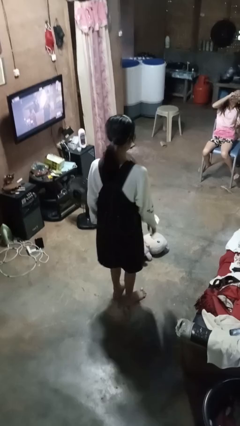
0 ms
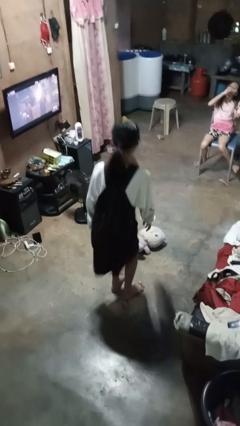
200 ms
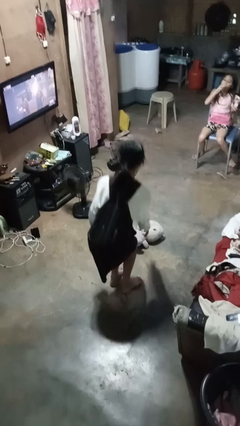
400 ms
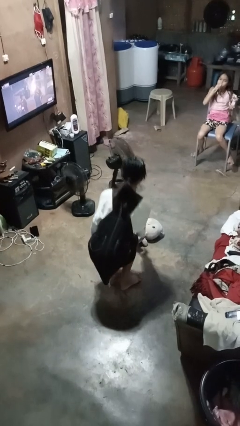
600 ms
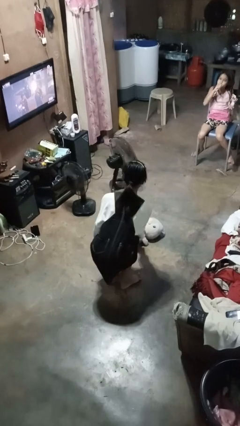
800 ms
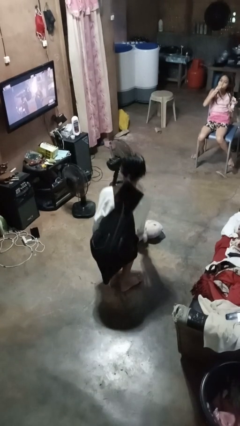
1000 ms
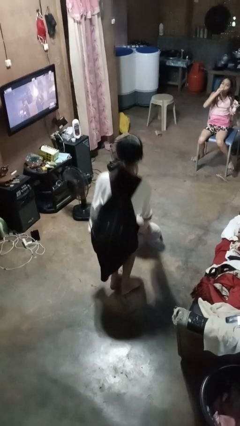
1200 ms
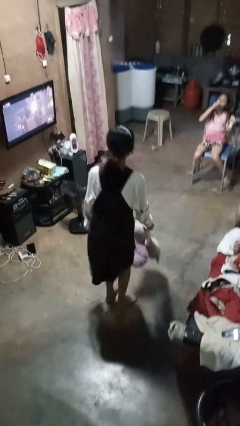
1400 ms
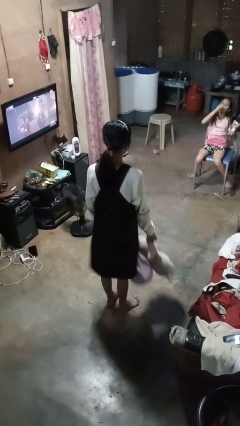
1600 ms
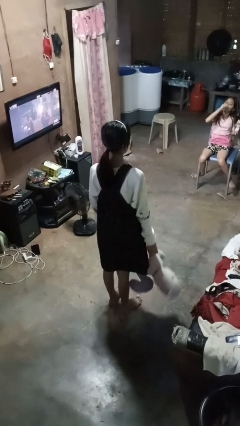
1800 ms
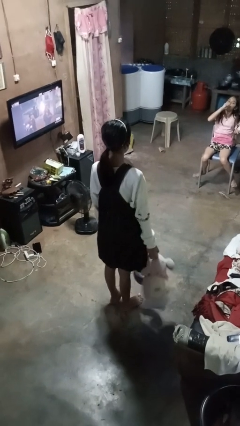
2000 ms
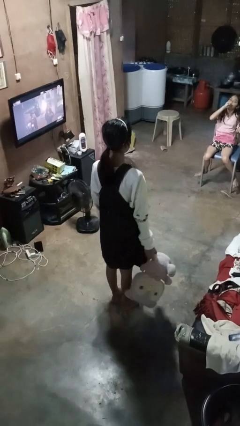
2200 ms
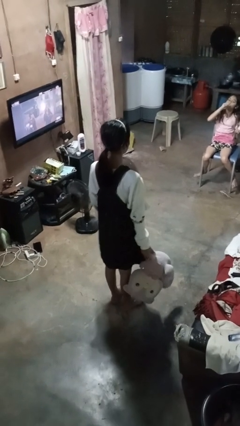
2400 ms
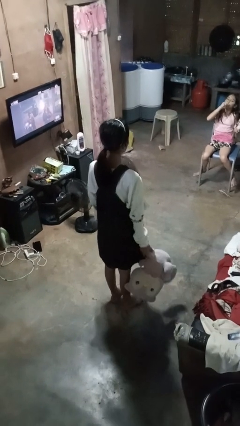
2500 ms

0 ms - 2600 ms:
person picks up object from floor

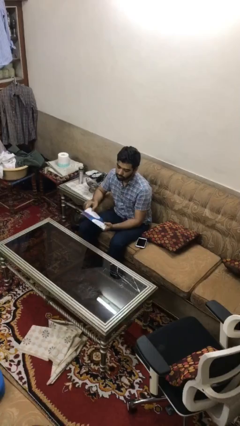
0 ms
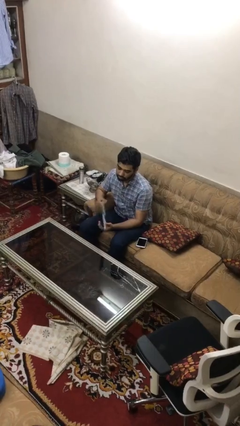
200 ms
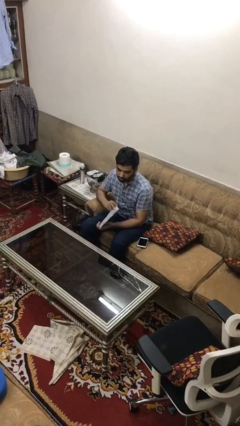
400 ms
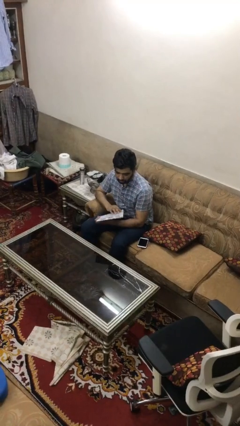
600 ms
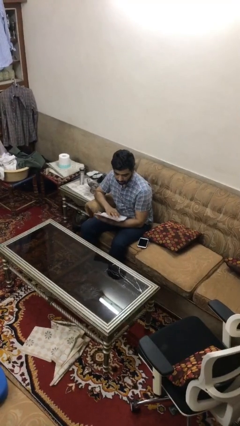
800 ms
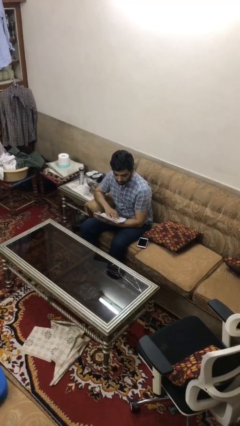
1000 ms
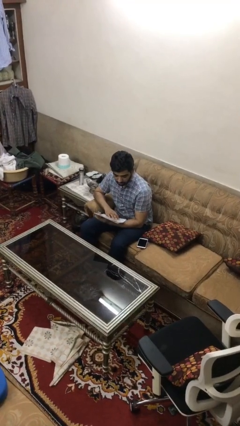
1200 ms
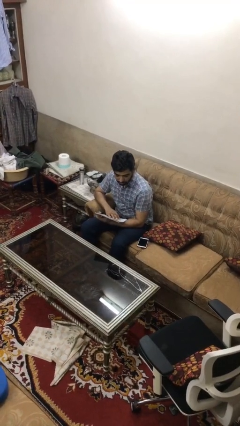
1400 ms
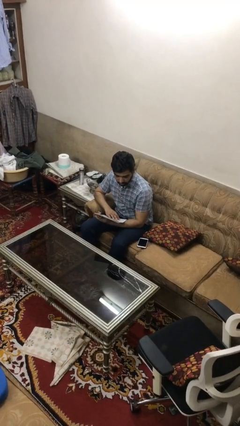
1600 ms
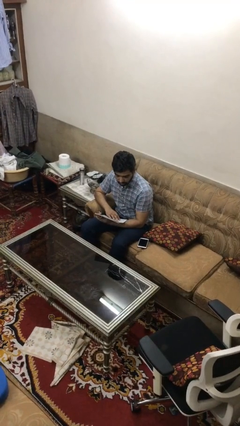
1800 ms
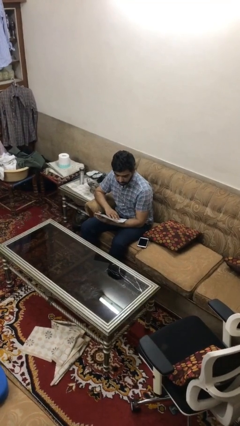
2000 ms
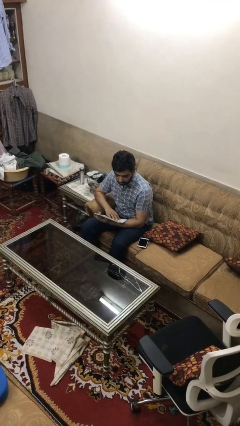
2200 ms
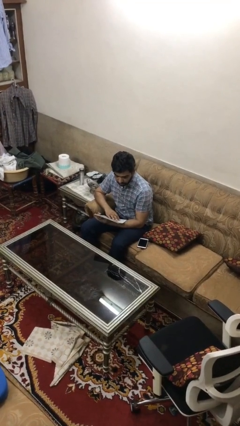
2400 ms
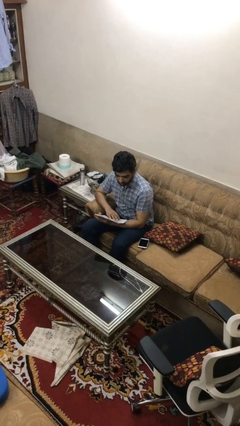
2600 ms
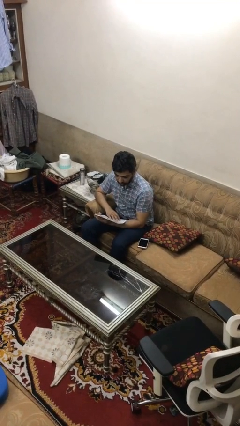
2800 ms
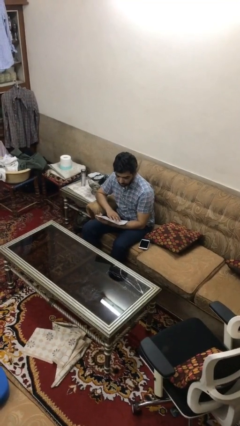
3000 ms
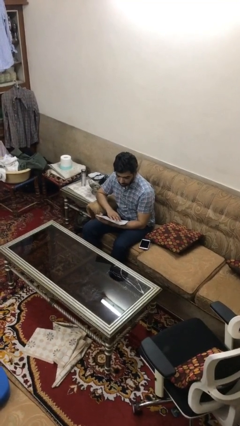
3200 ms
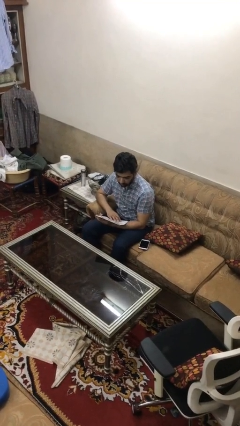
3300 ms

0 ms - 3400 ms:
person reads document

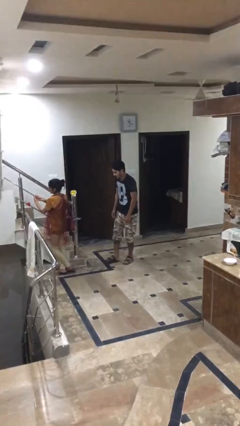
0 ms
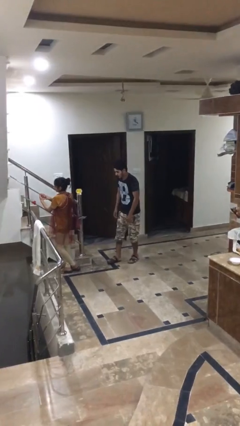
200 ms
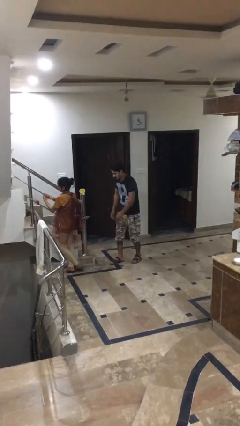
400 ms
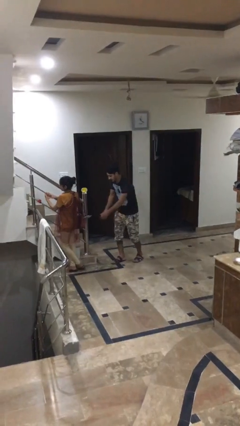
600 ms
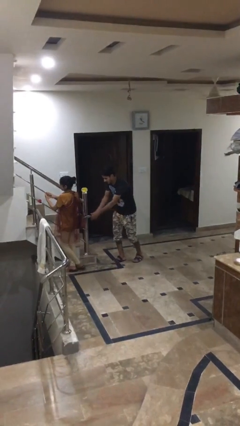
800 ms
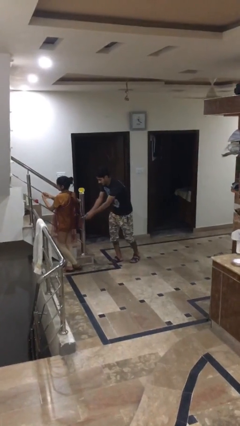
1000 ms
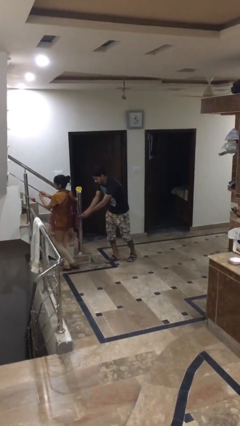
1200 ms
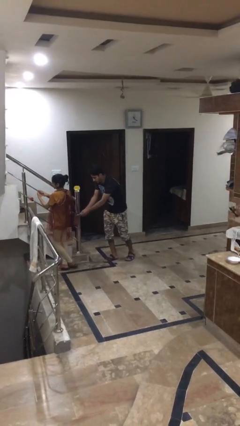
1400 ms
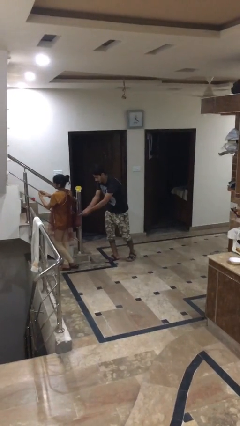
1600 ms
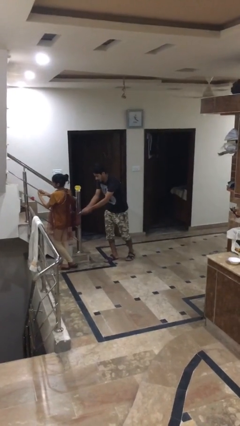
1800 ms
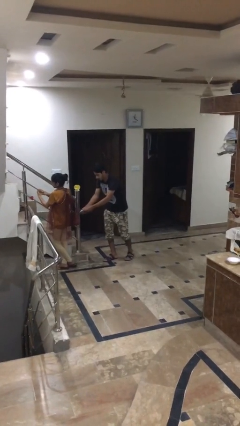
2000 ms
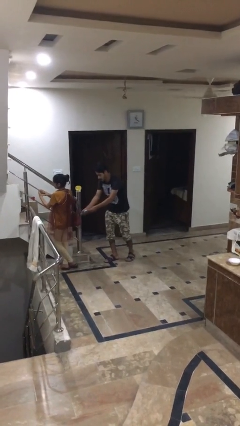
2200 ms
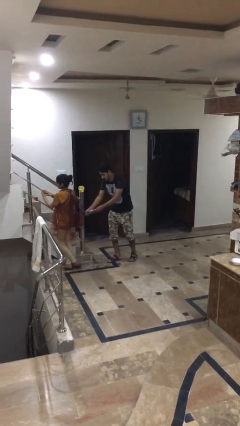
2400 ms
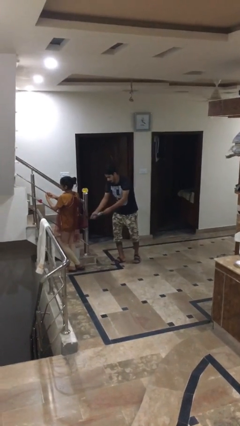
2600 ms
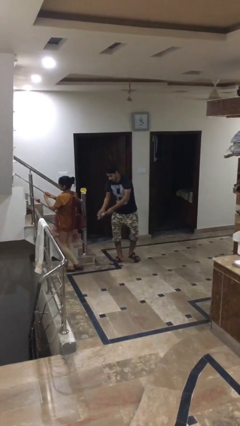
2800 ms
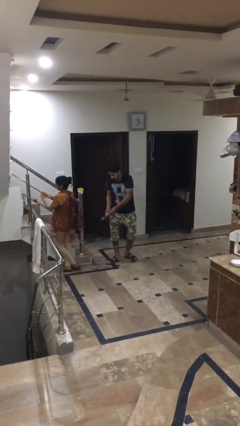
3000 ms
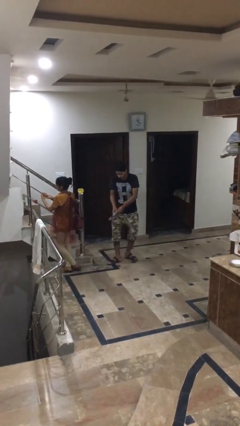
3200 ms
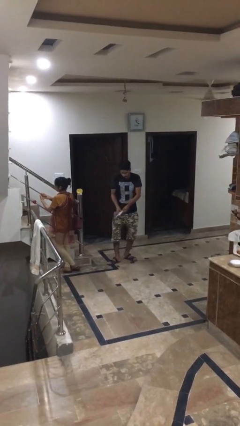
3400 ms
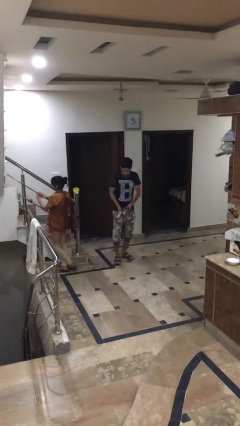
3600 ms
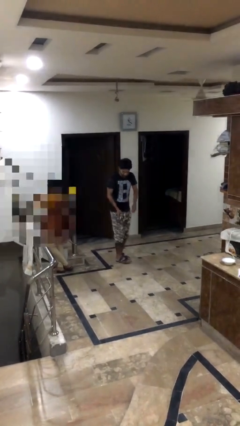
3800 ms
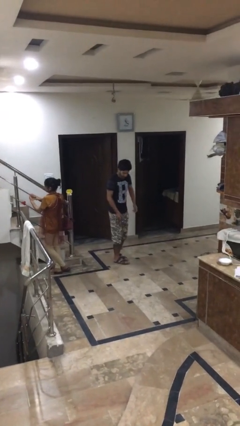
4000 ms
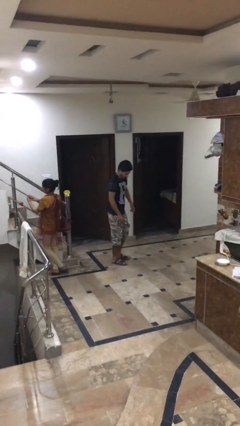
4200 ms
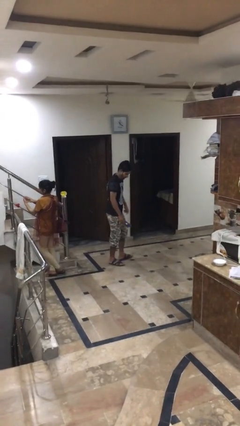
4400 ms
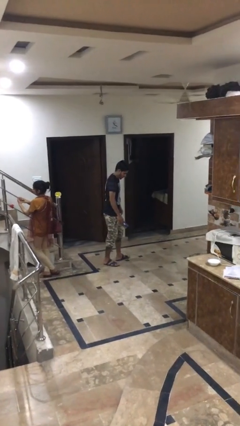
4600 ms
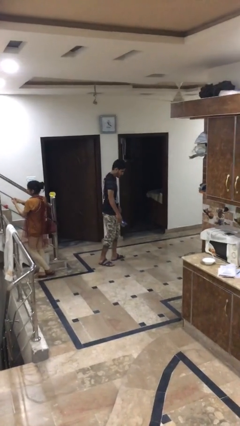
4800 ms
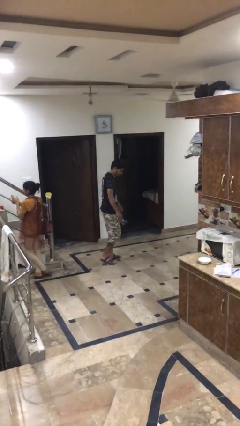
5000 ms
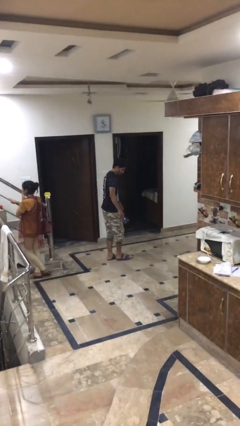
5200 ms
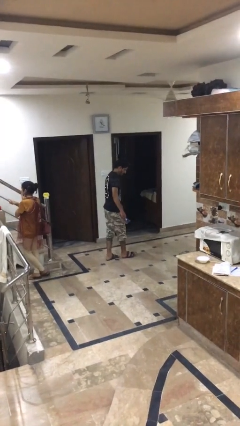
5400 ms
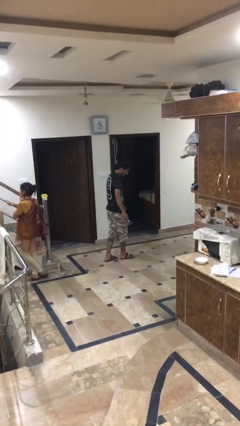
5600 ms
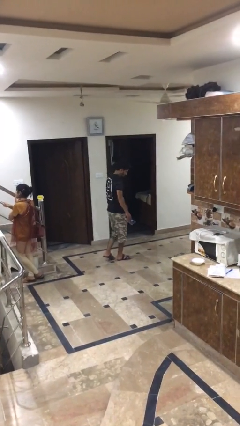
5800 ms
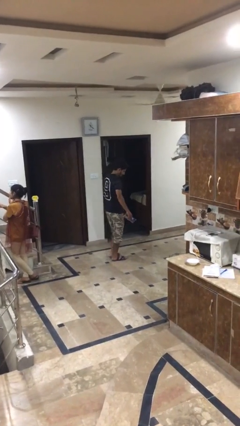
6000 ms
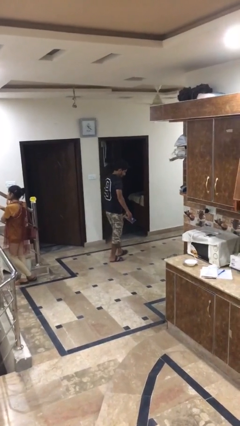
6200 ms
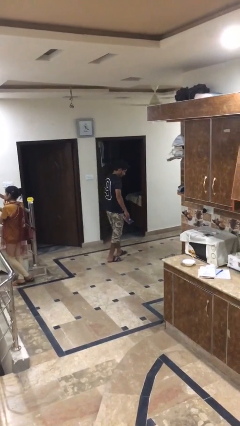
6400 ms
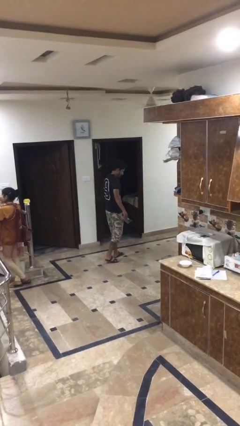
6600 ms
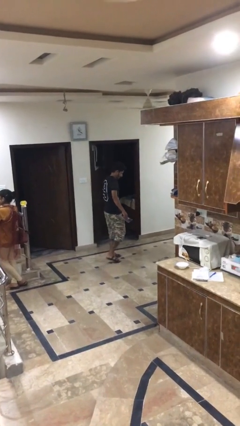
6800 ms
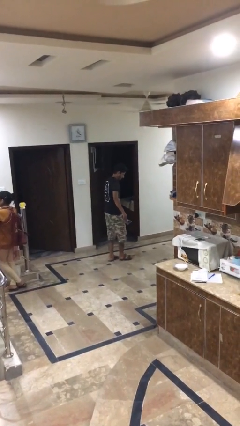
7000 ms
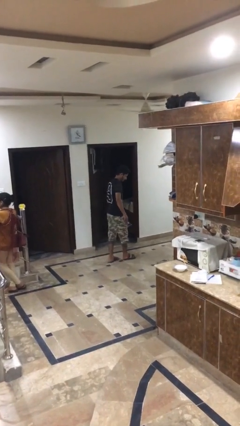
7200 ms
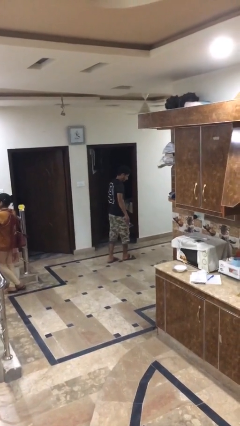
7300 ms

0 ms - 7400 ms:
person steals object from person

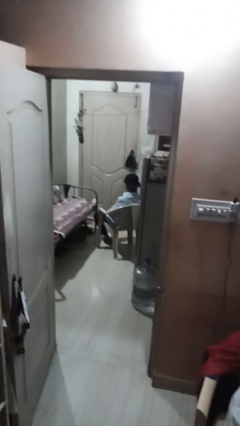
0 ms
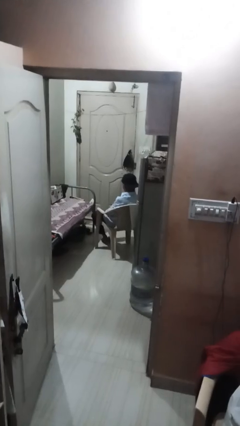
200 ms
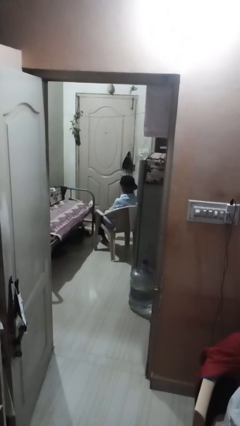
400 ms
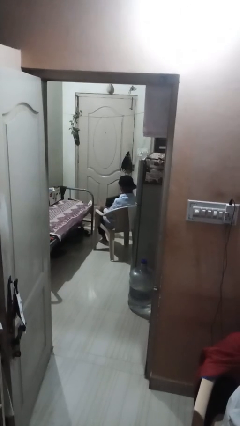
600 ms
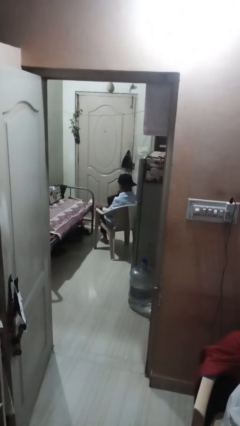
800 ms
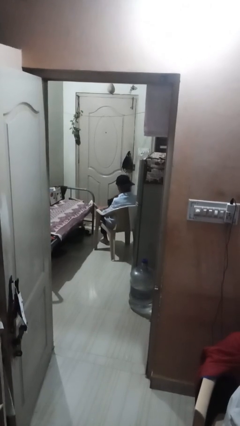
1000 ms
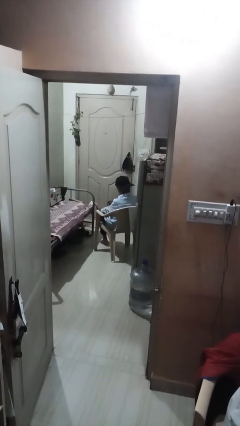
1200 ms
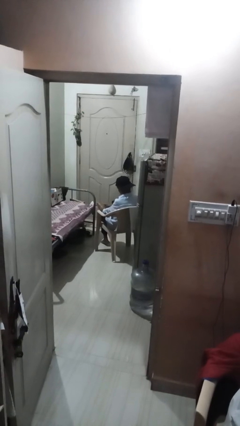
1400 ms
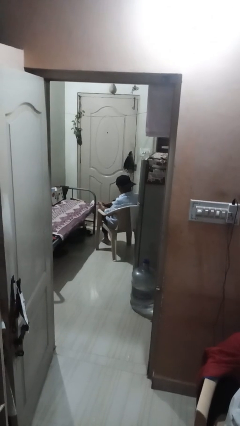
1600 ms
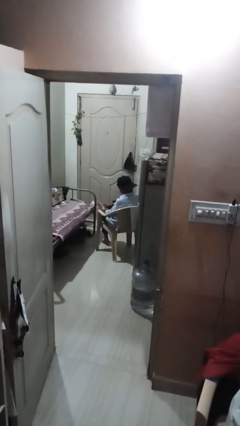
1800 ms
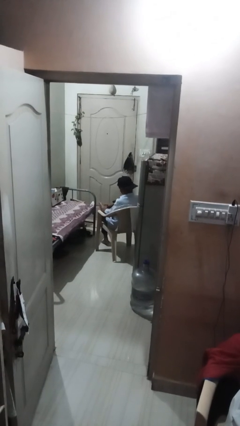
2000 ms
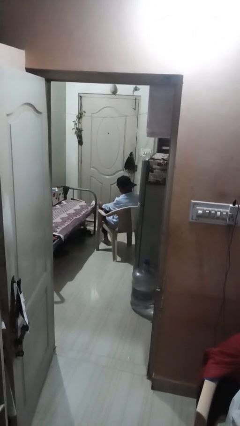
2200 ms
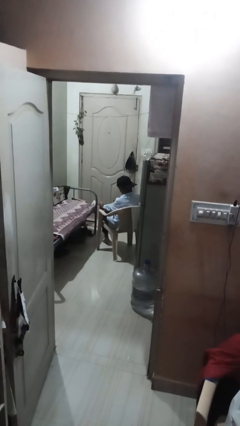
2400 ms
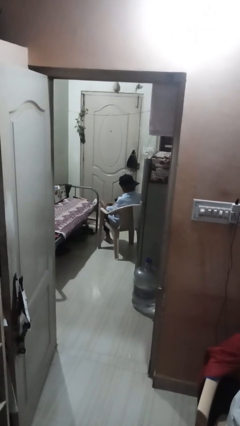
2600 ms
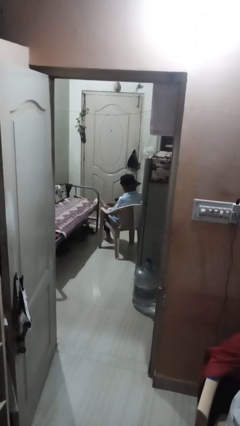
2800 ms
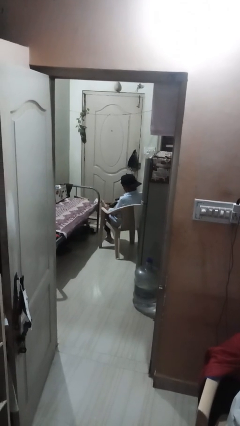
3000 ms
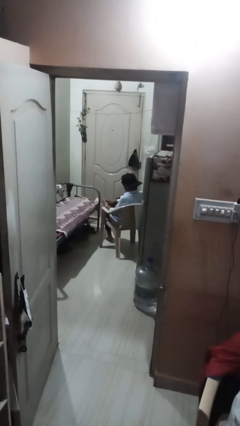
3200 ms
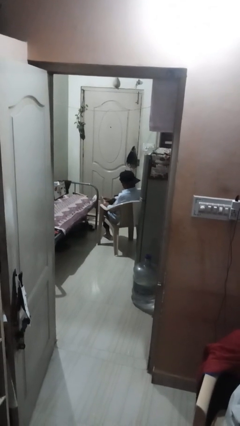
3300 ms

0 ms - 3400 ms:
person rubs foot

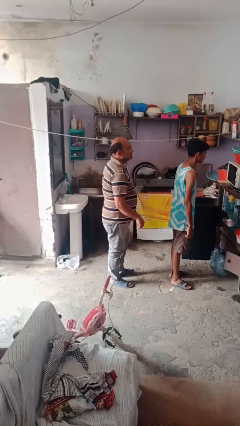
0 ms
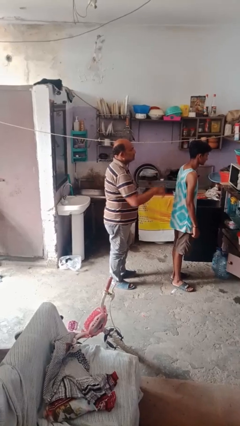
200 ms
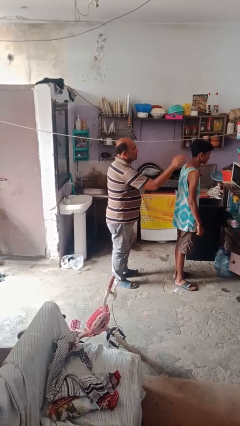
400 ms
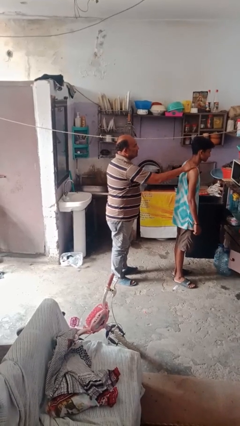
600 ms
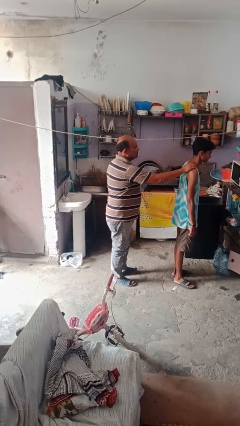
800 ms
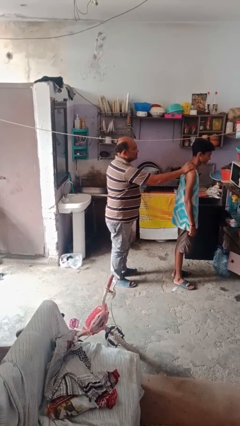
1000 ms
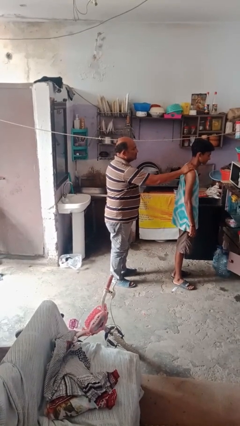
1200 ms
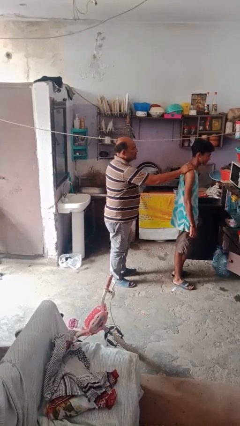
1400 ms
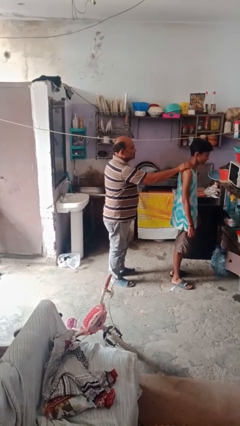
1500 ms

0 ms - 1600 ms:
person grabs person by shoulder
